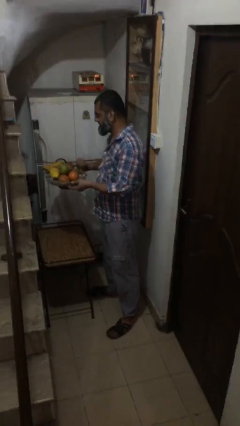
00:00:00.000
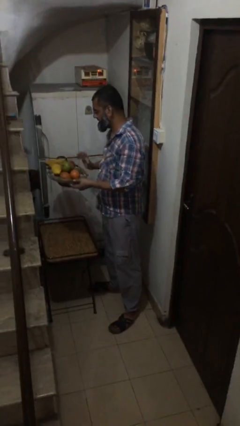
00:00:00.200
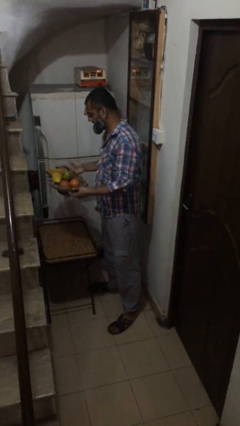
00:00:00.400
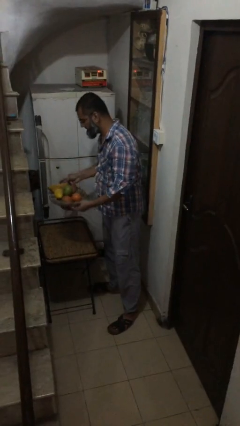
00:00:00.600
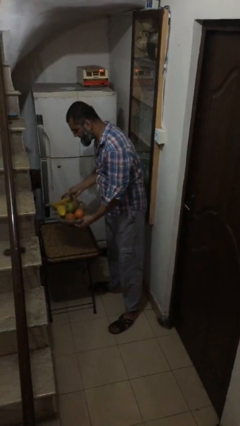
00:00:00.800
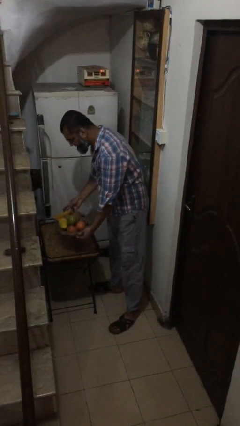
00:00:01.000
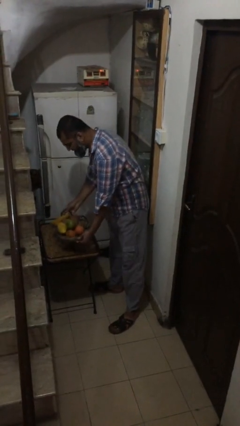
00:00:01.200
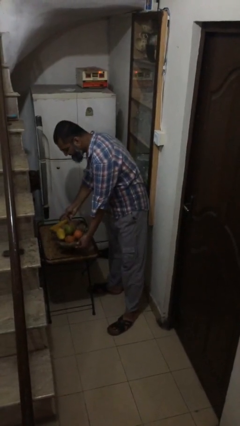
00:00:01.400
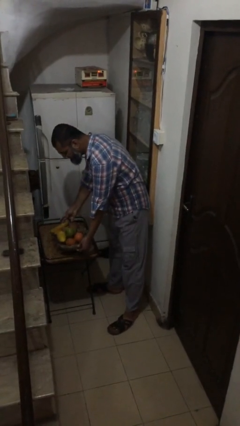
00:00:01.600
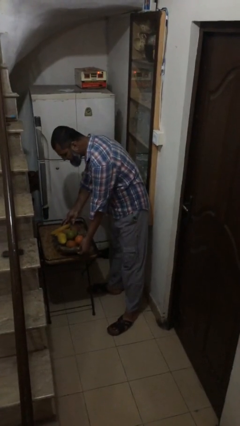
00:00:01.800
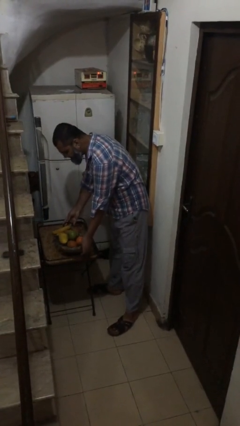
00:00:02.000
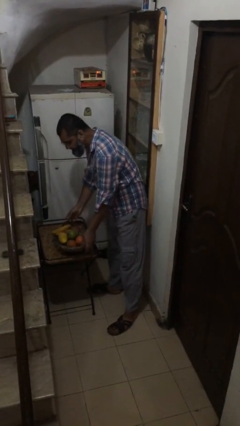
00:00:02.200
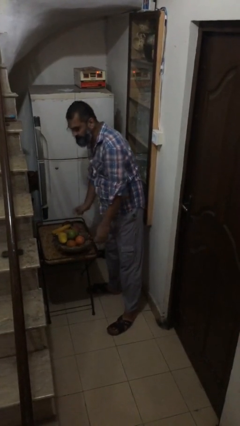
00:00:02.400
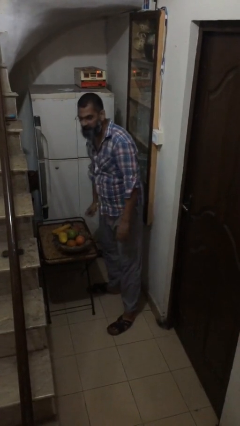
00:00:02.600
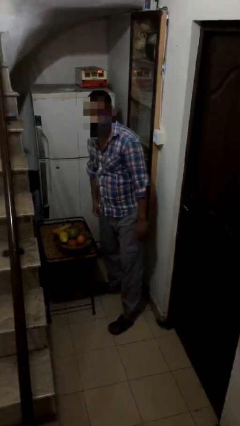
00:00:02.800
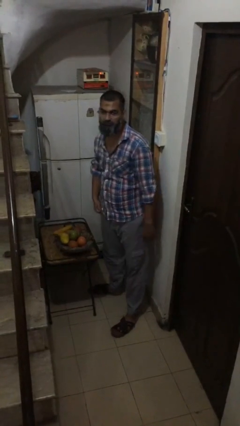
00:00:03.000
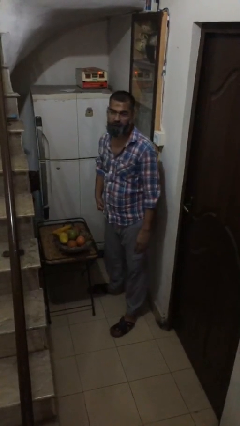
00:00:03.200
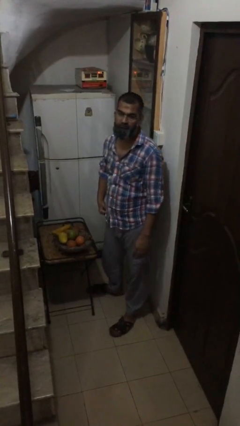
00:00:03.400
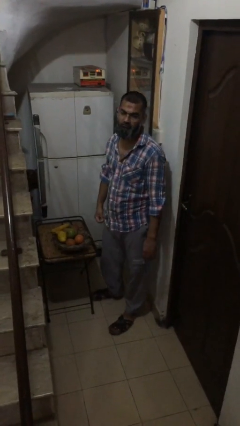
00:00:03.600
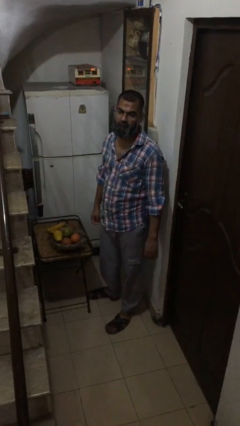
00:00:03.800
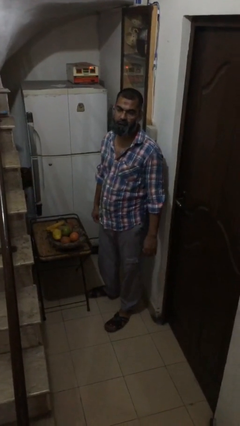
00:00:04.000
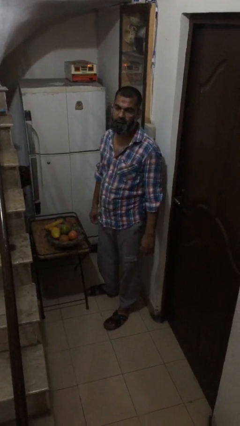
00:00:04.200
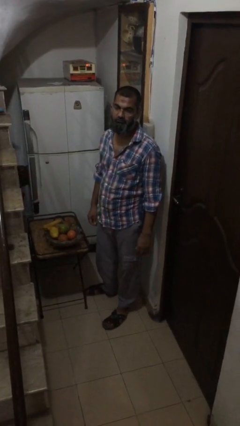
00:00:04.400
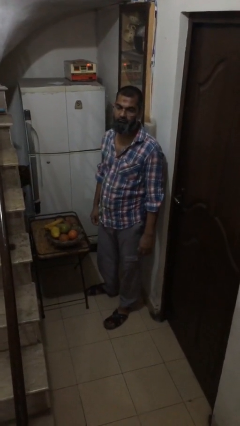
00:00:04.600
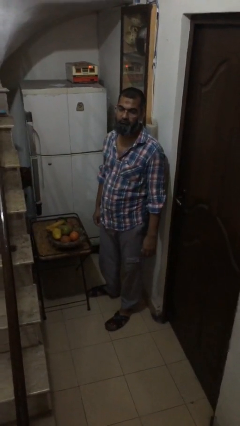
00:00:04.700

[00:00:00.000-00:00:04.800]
person puts down object on table

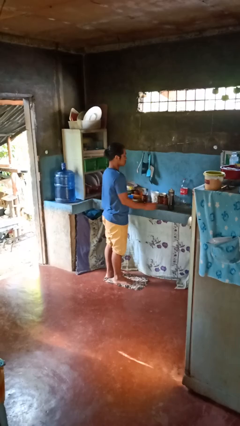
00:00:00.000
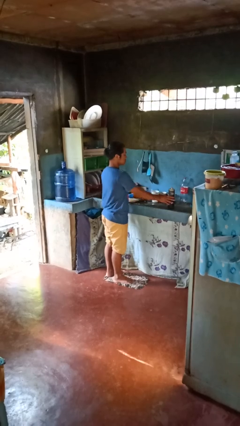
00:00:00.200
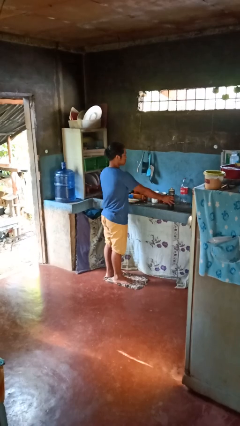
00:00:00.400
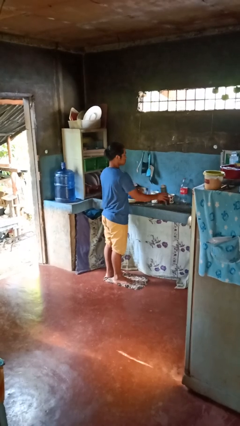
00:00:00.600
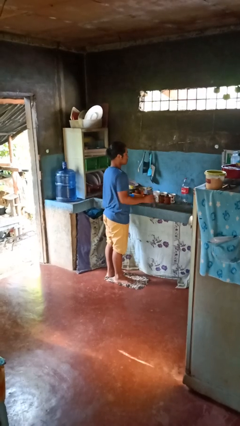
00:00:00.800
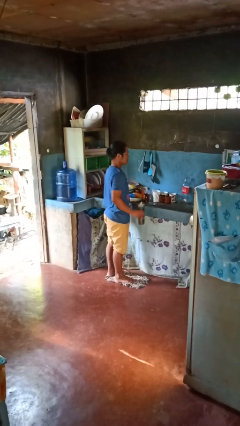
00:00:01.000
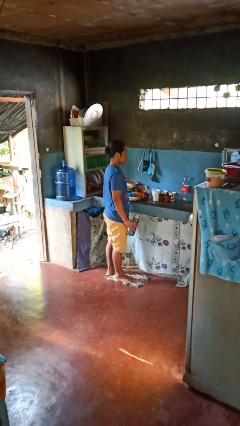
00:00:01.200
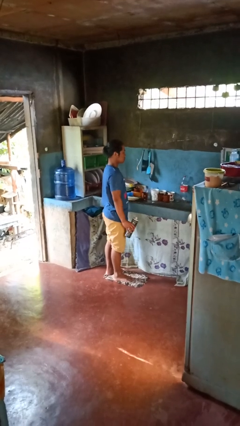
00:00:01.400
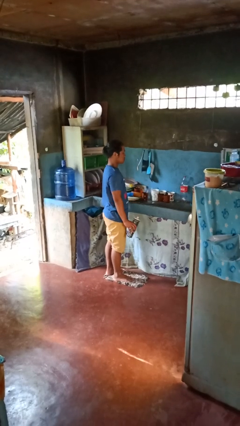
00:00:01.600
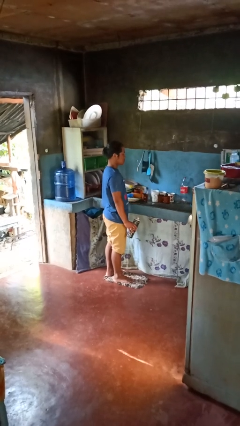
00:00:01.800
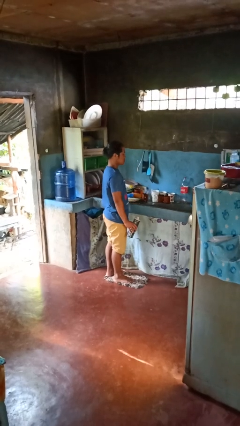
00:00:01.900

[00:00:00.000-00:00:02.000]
person picks up object from countertop

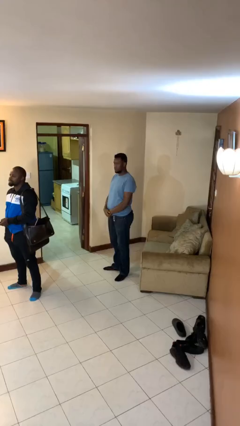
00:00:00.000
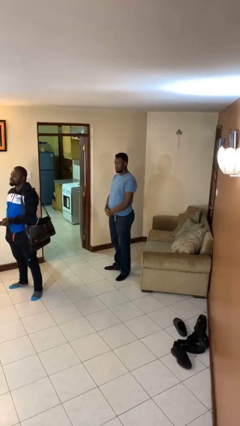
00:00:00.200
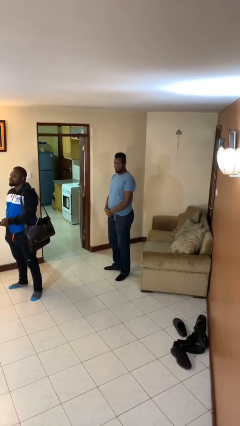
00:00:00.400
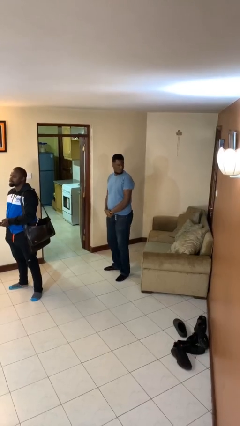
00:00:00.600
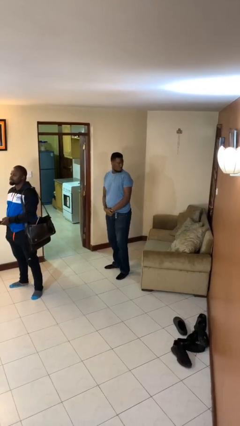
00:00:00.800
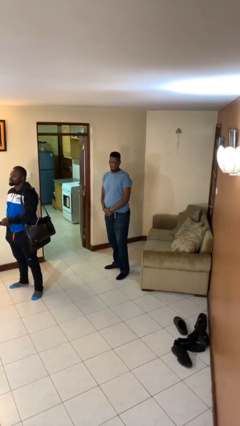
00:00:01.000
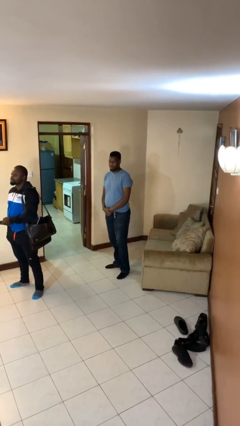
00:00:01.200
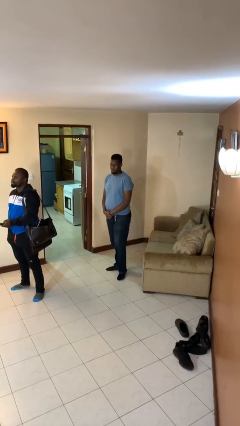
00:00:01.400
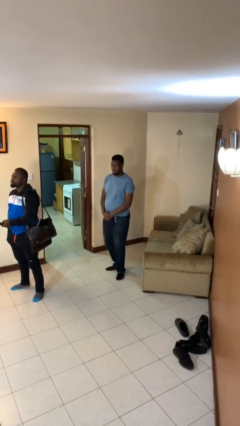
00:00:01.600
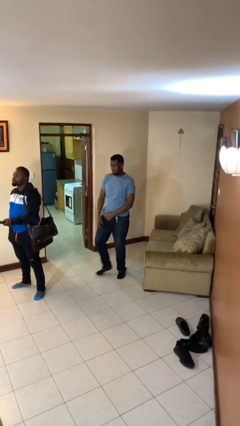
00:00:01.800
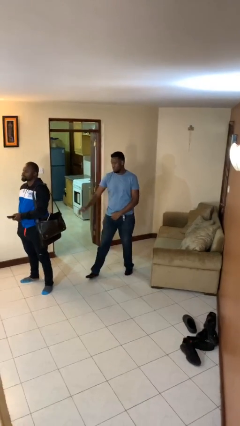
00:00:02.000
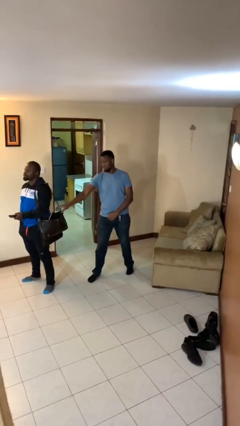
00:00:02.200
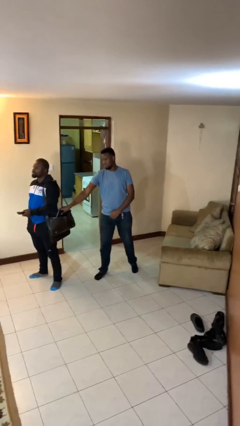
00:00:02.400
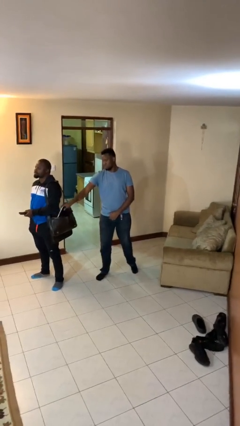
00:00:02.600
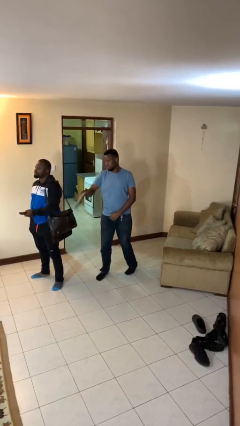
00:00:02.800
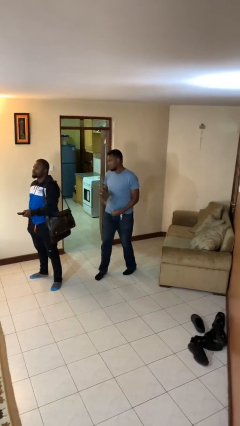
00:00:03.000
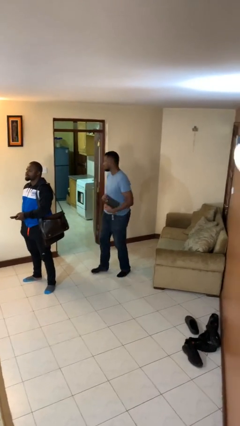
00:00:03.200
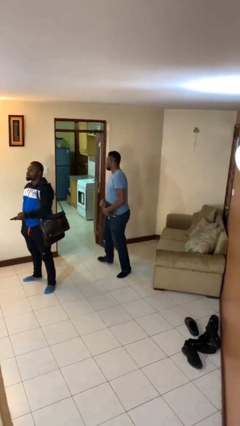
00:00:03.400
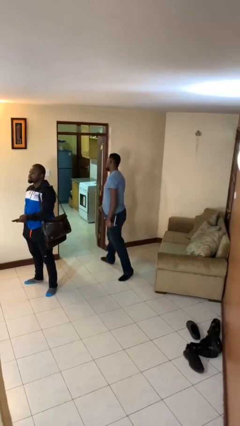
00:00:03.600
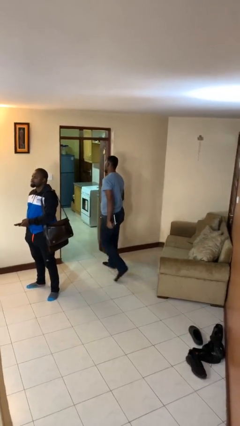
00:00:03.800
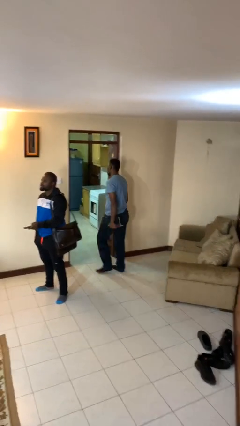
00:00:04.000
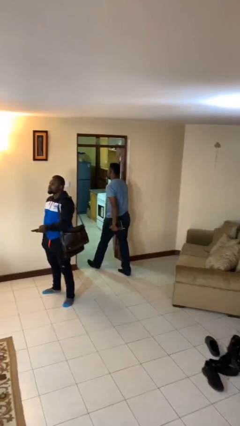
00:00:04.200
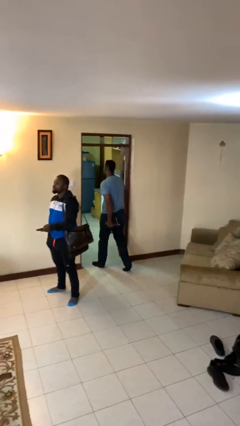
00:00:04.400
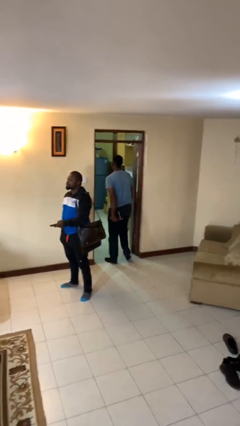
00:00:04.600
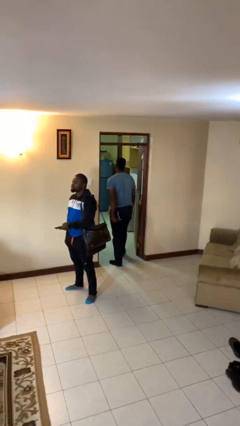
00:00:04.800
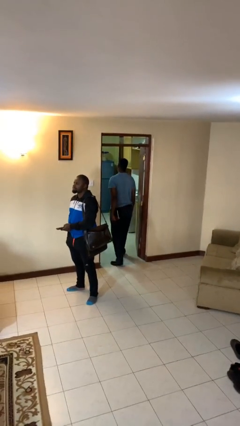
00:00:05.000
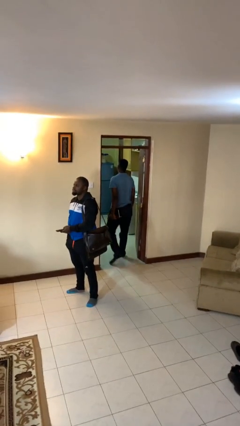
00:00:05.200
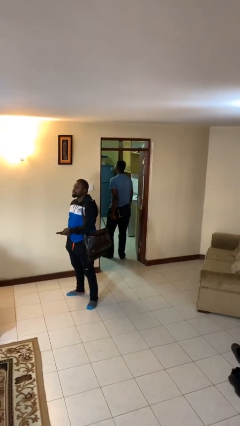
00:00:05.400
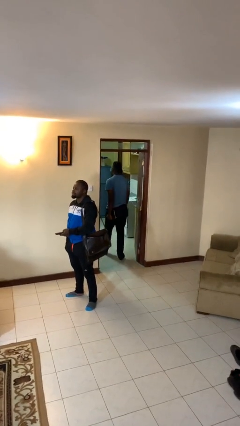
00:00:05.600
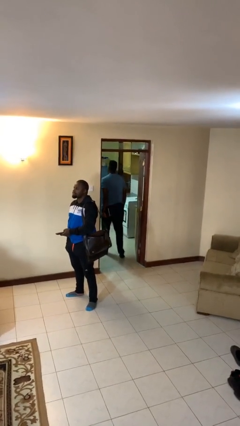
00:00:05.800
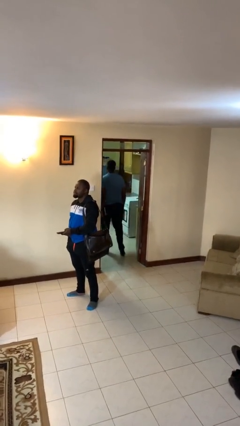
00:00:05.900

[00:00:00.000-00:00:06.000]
person steals object from person

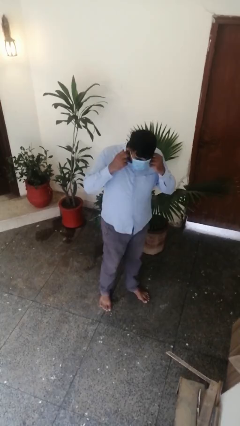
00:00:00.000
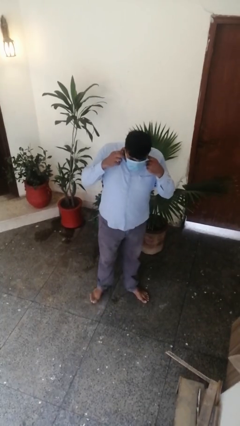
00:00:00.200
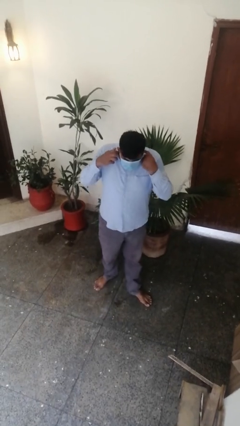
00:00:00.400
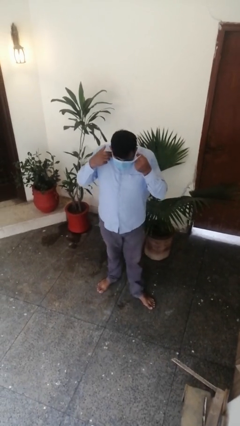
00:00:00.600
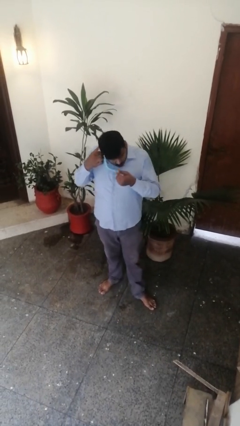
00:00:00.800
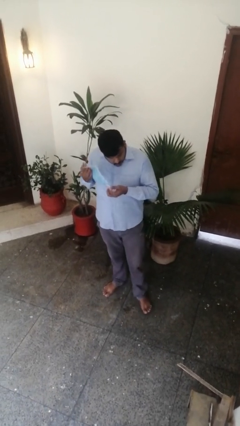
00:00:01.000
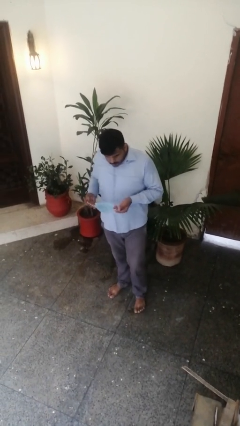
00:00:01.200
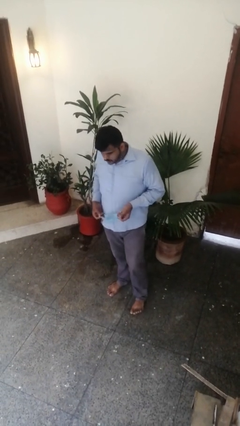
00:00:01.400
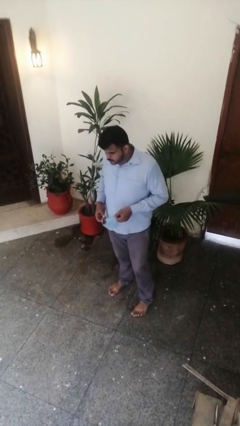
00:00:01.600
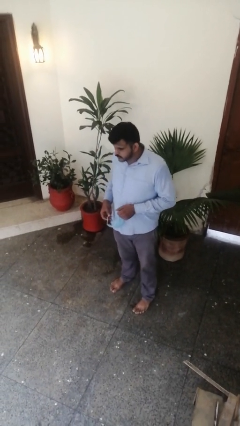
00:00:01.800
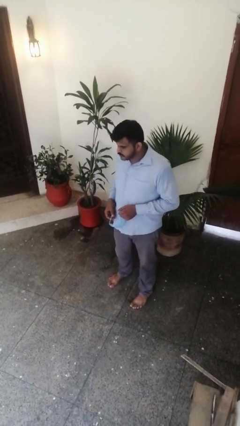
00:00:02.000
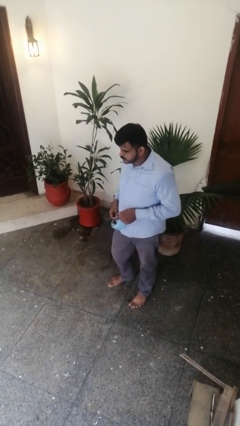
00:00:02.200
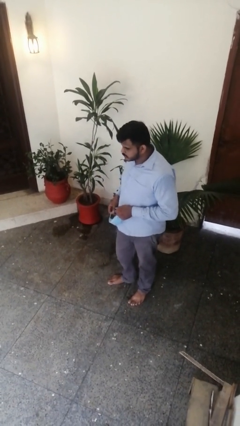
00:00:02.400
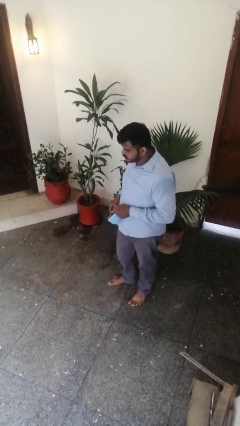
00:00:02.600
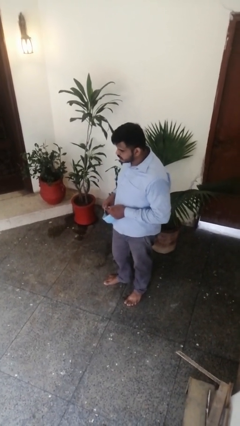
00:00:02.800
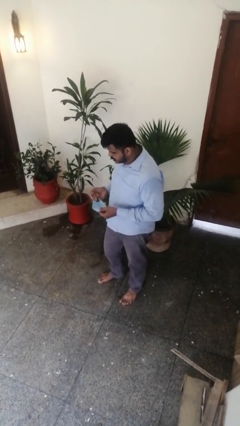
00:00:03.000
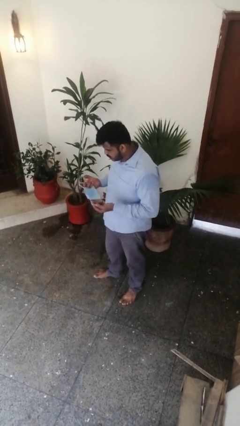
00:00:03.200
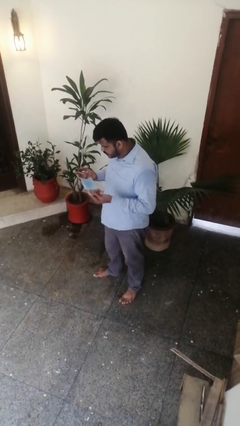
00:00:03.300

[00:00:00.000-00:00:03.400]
person takes off facemask

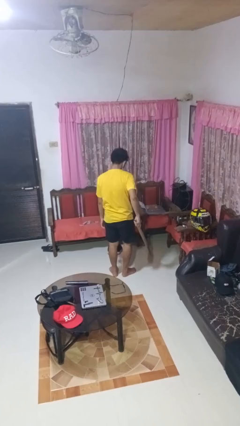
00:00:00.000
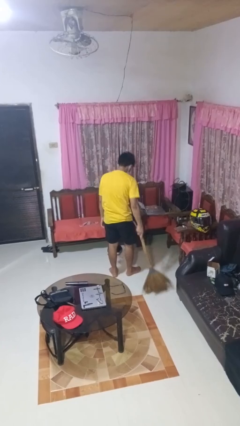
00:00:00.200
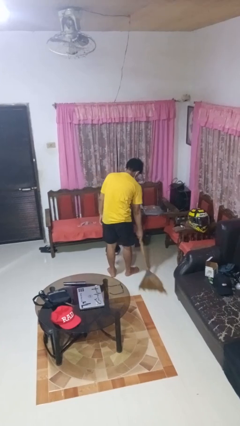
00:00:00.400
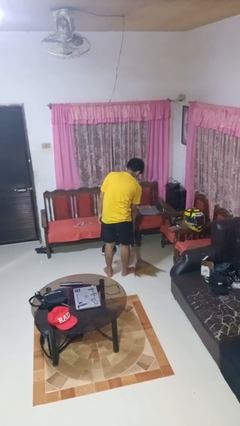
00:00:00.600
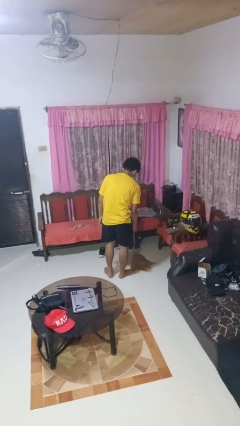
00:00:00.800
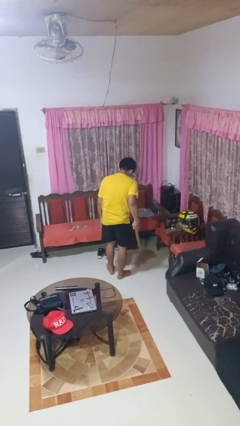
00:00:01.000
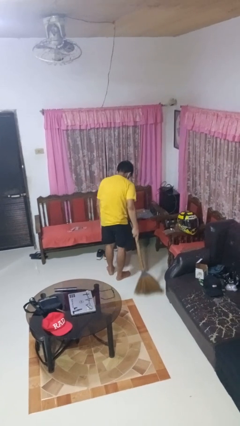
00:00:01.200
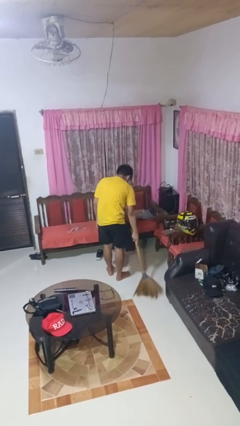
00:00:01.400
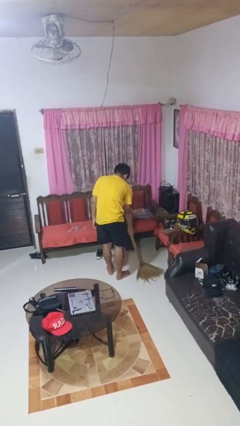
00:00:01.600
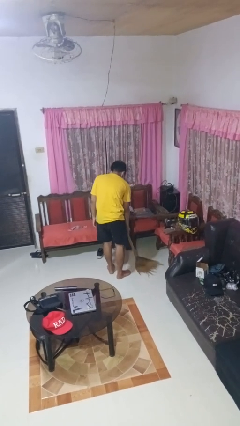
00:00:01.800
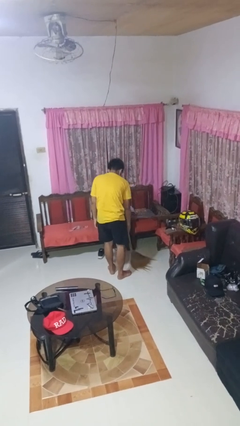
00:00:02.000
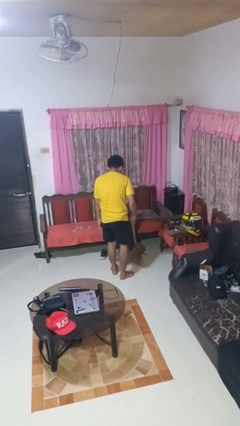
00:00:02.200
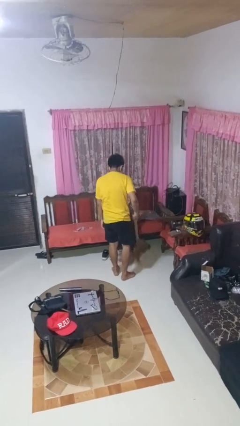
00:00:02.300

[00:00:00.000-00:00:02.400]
person sweeps floor
